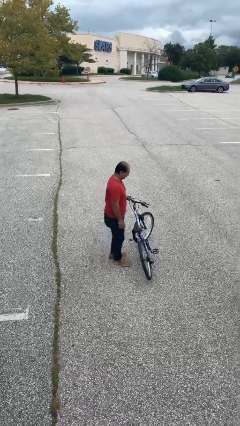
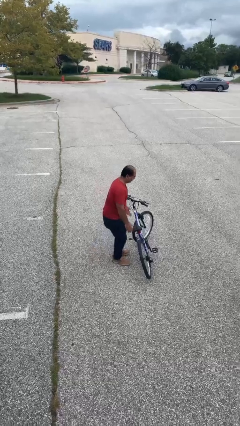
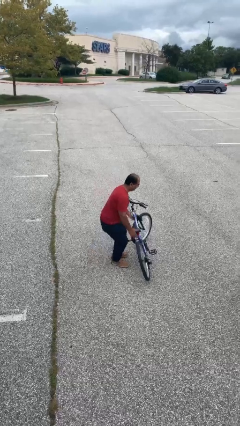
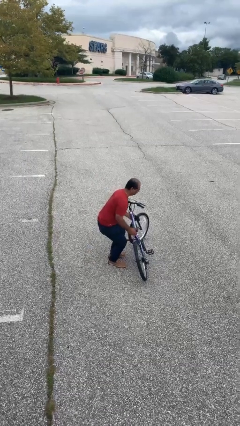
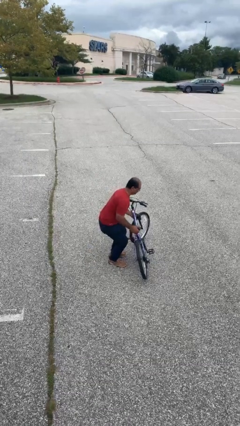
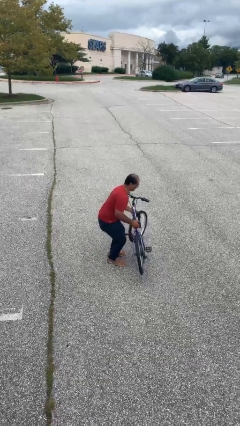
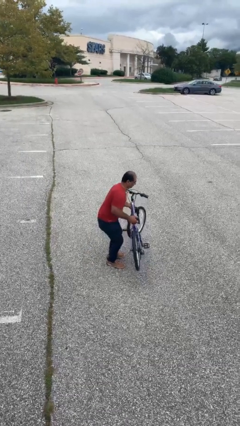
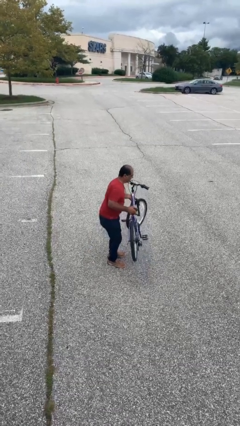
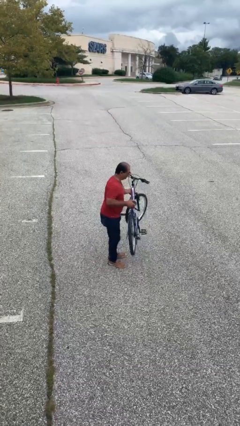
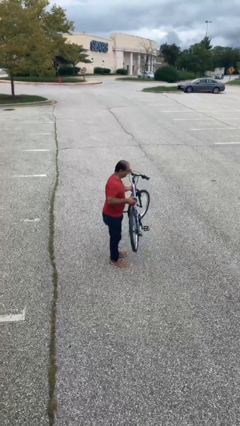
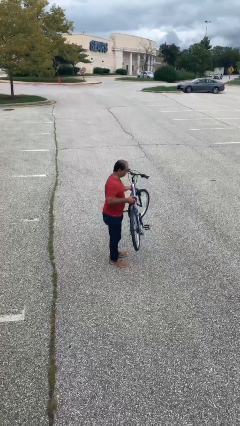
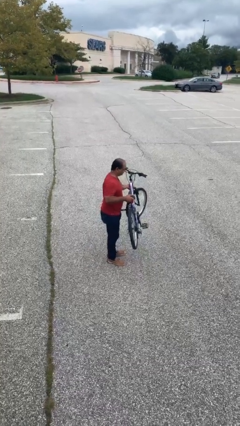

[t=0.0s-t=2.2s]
person picks up object from floor

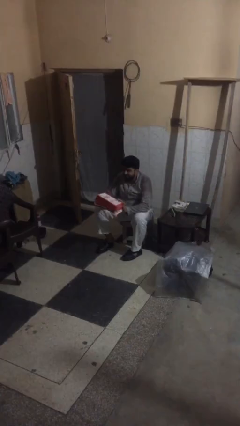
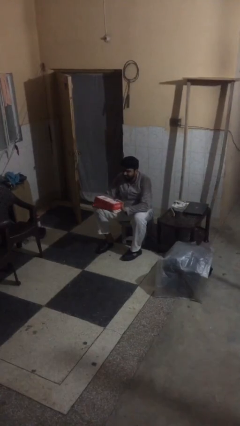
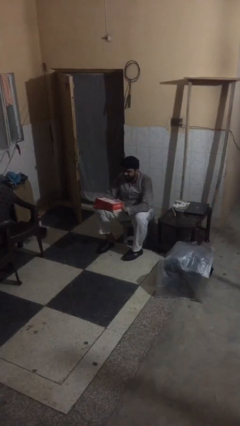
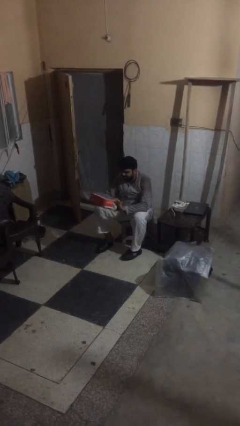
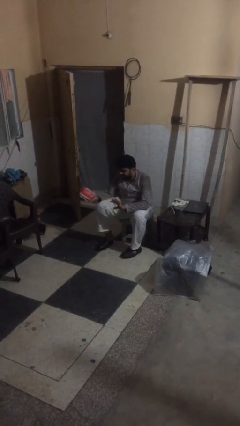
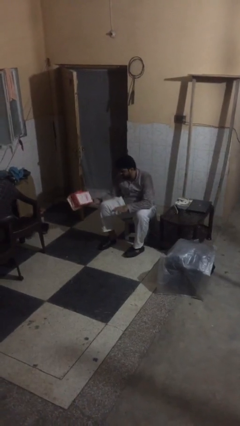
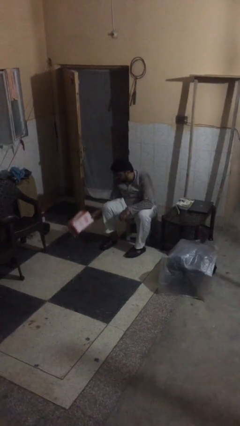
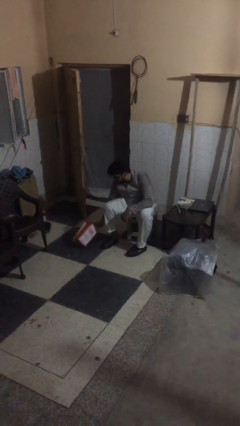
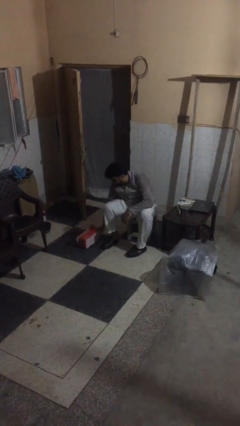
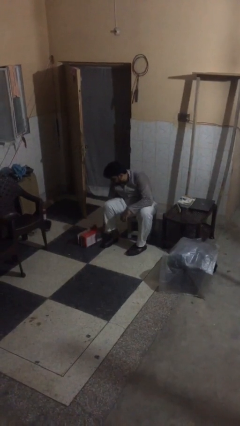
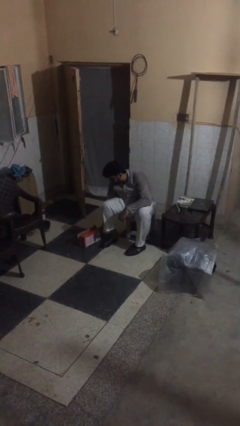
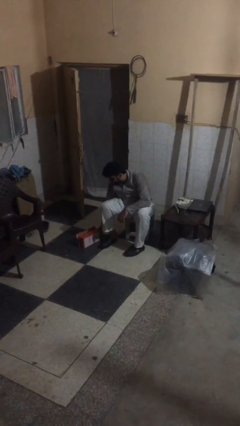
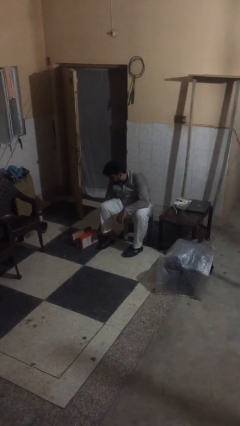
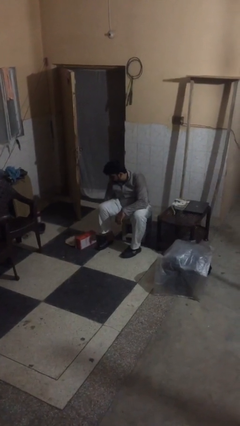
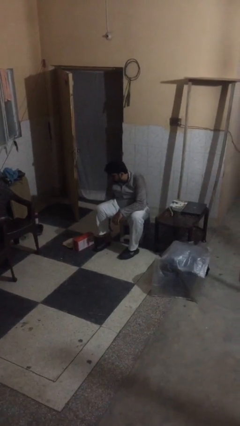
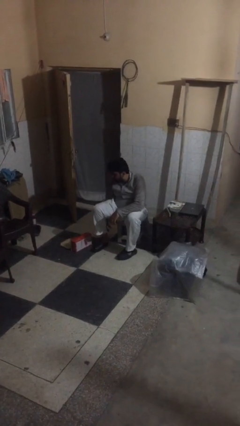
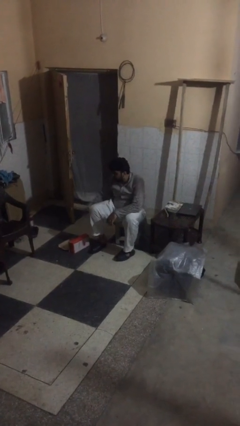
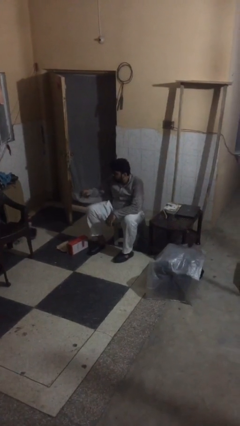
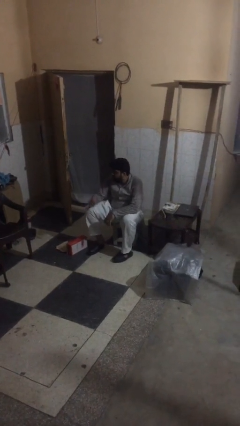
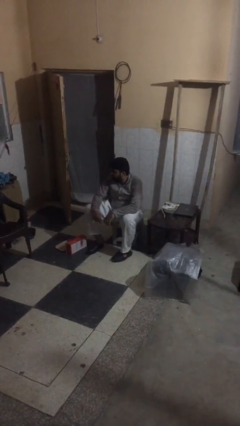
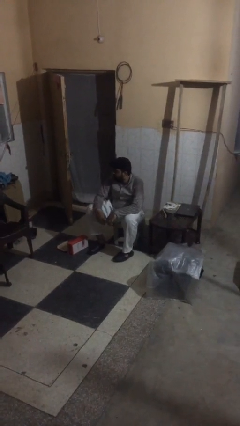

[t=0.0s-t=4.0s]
person puts down object on floor

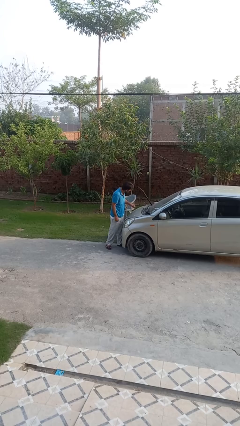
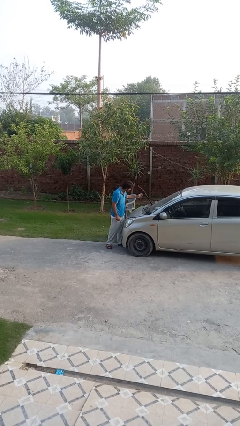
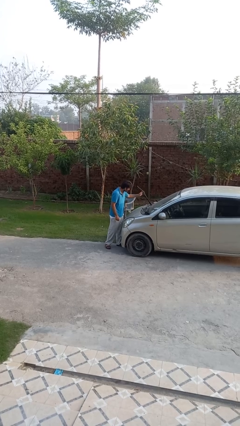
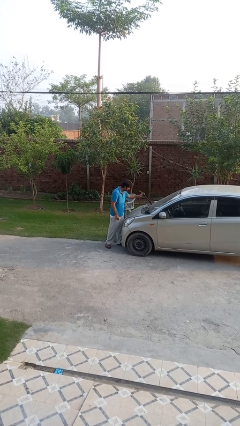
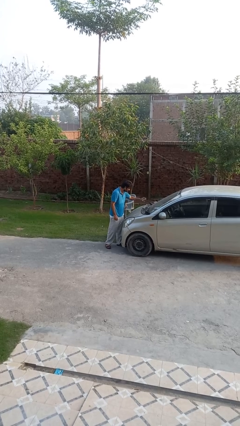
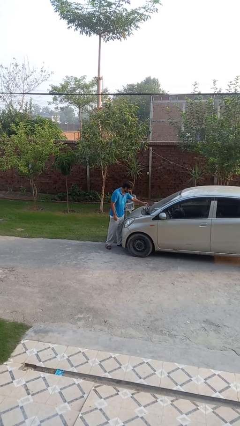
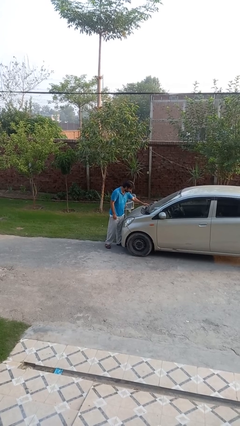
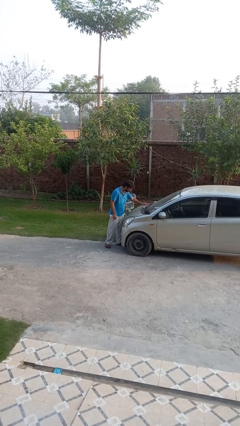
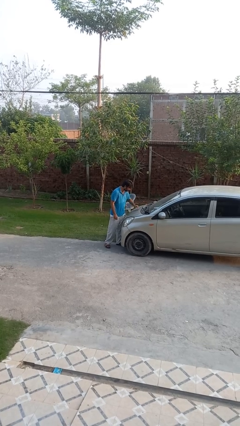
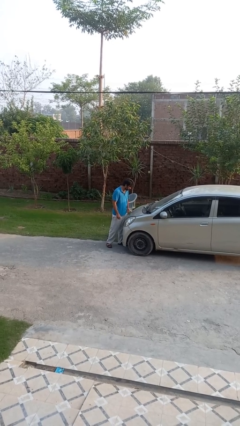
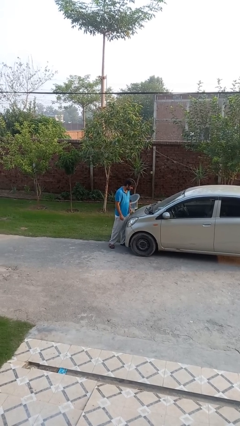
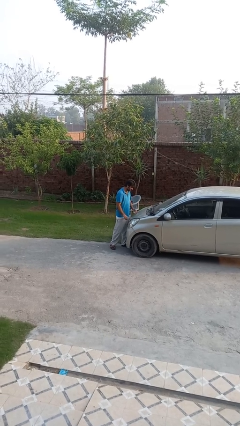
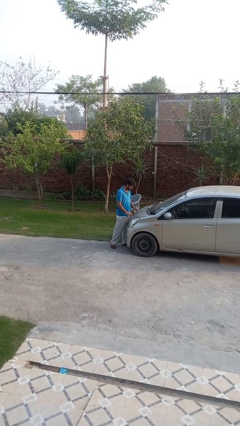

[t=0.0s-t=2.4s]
person flips down car wipers

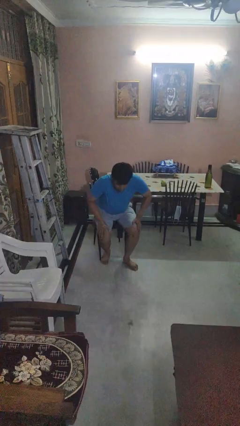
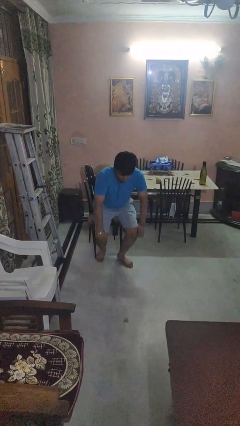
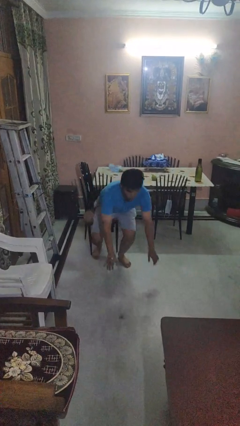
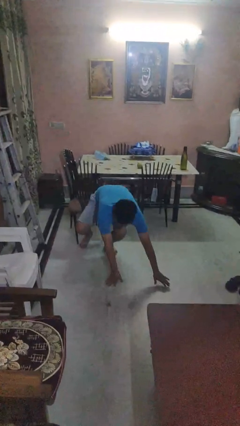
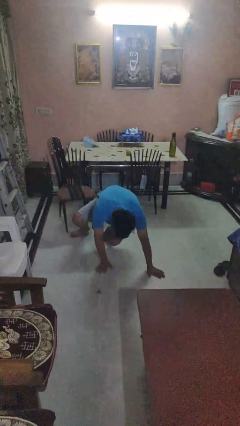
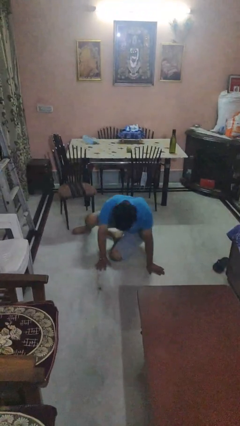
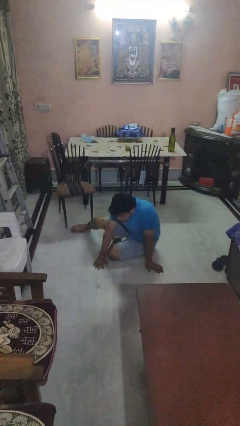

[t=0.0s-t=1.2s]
person falls while standing

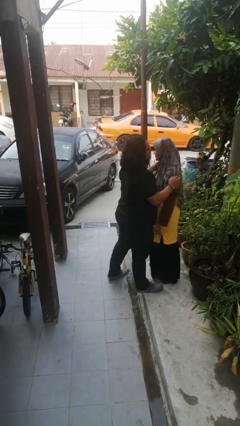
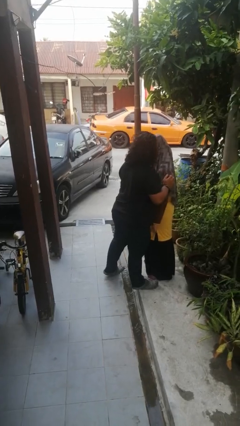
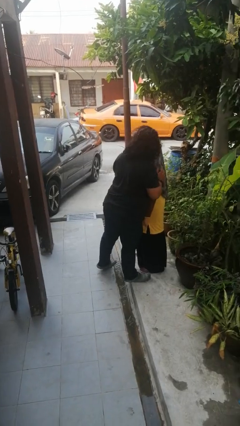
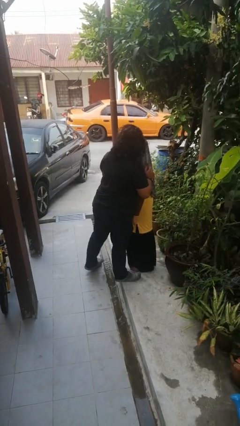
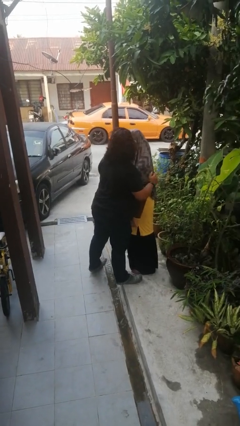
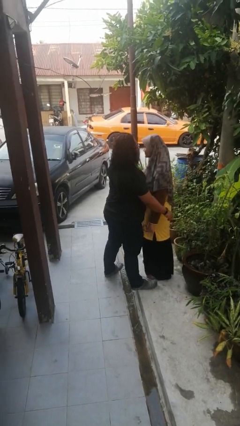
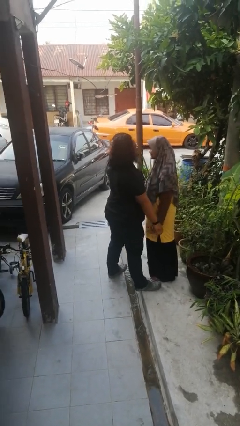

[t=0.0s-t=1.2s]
person kisses cheek of person

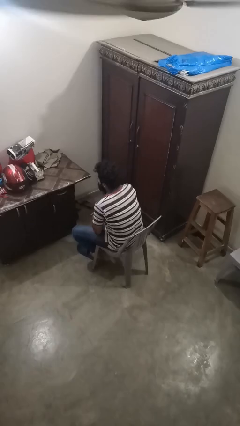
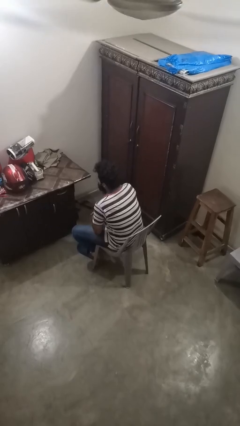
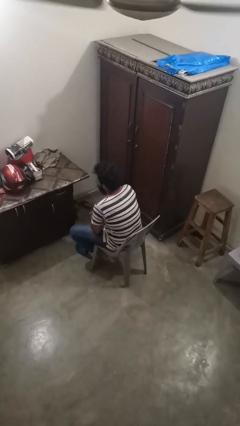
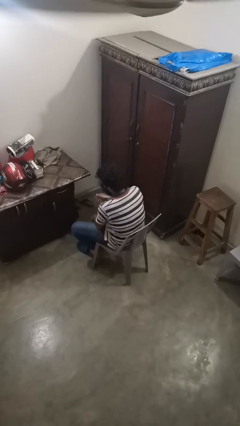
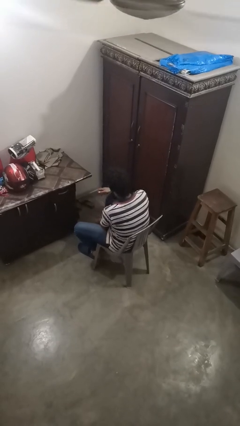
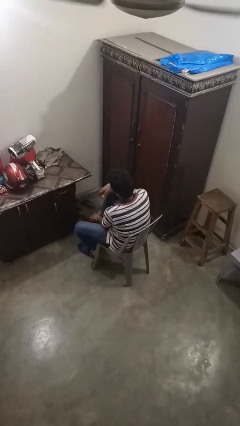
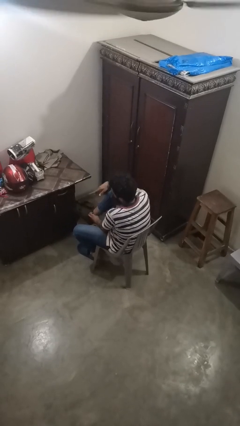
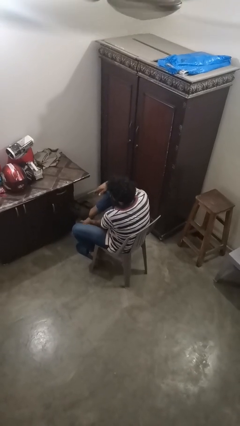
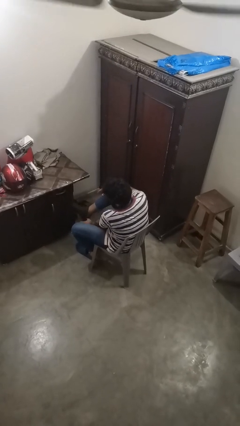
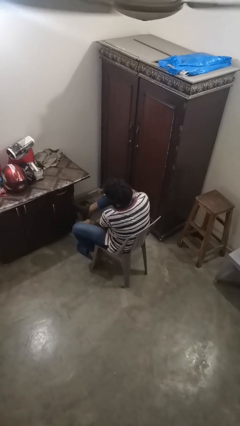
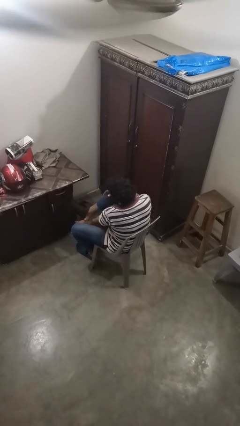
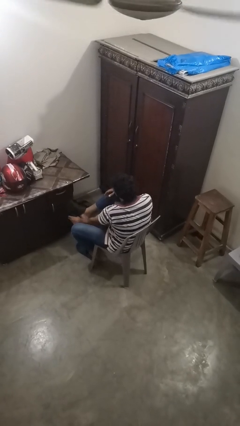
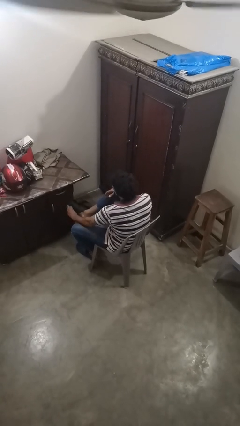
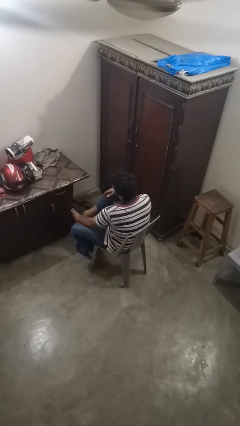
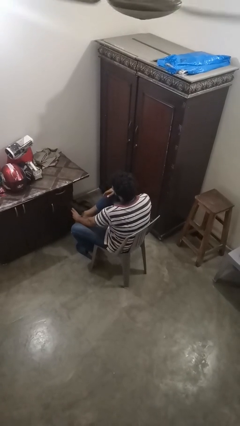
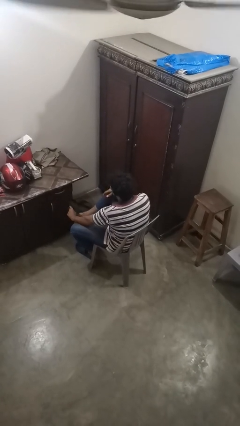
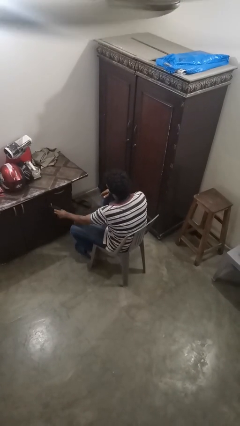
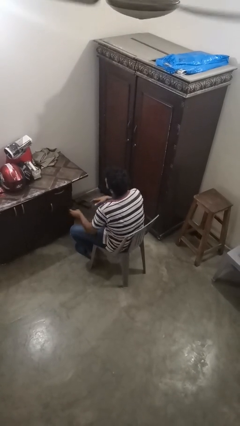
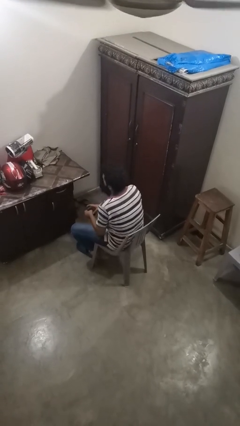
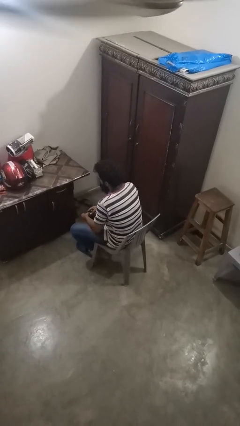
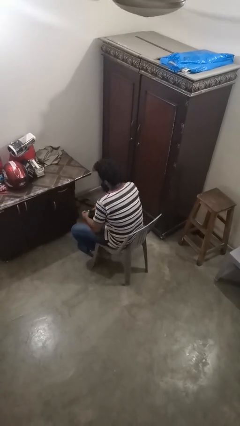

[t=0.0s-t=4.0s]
person takes off socks

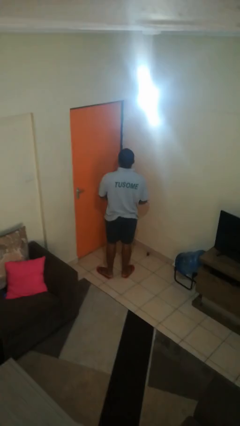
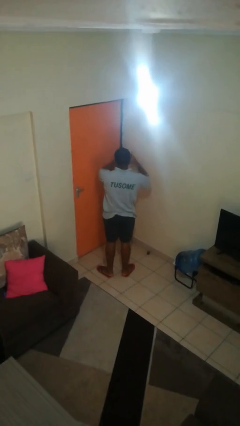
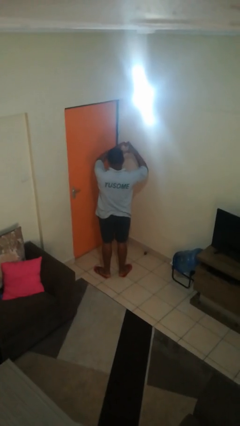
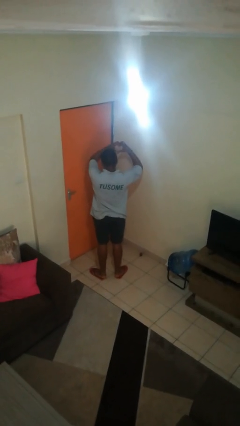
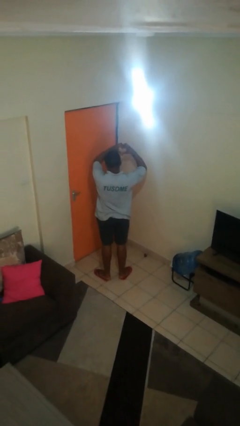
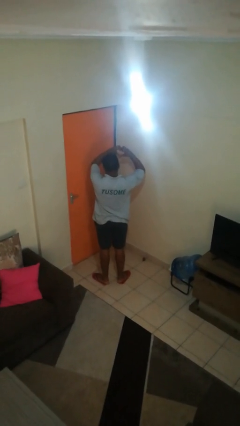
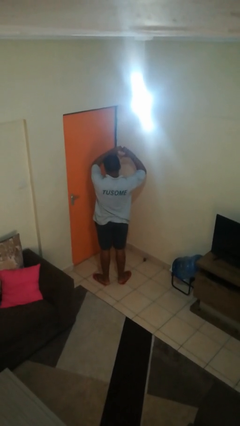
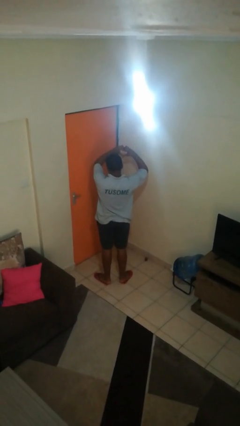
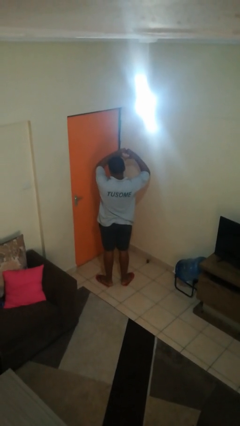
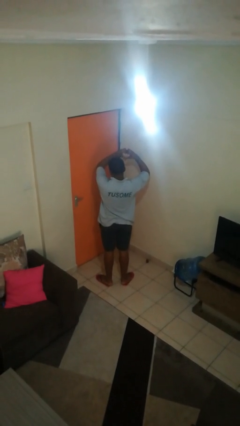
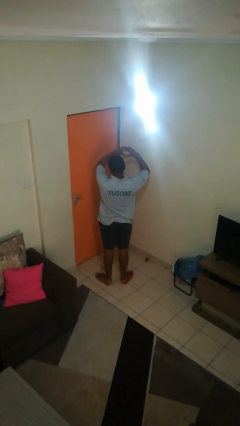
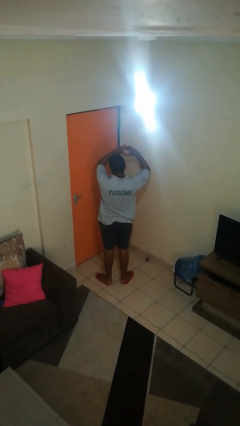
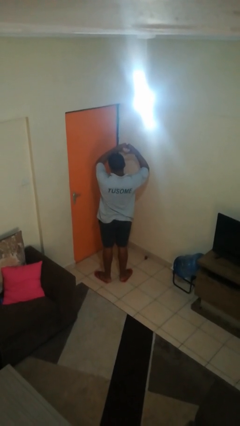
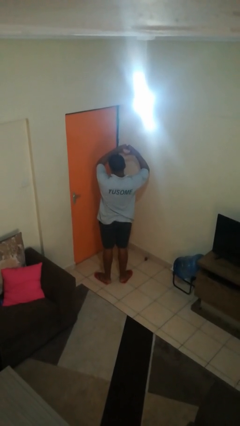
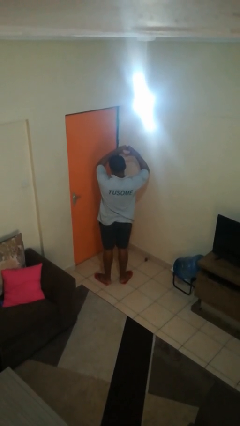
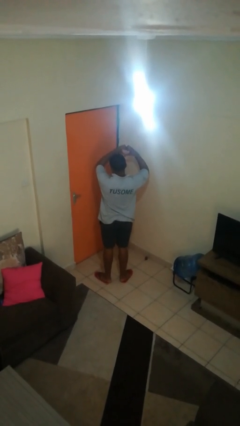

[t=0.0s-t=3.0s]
person gestures heart
